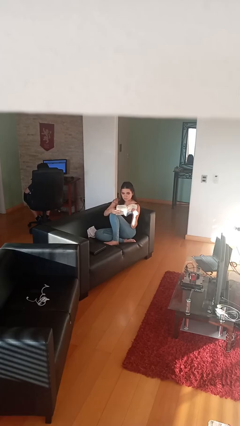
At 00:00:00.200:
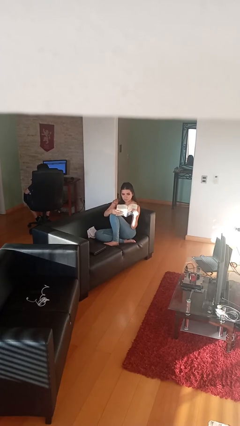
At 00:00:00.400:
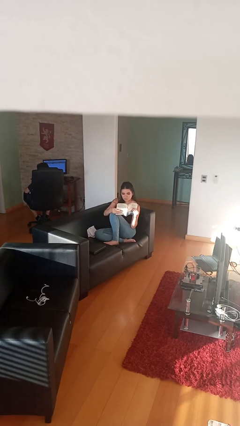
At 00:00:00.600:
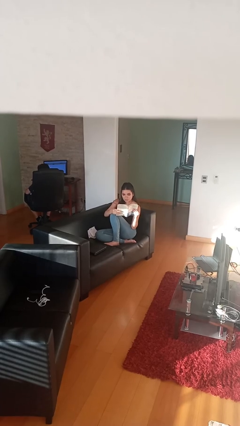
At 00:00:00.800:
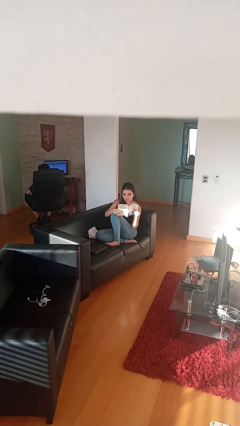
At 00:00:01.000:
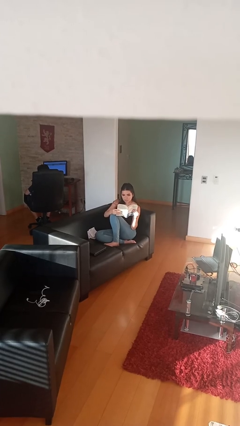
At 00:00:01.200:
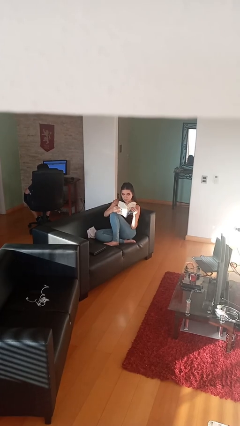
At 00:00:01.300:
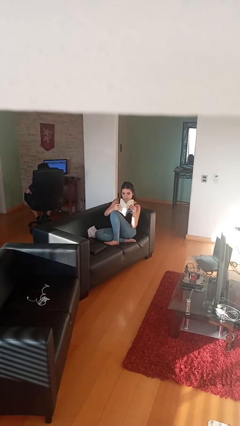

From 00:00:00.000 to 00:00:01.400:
person reads document

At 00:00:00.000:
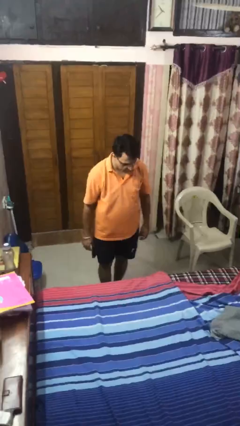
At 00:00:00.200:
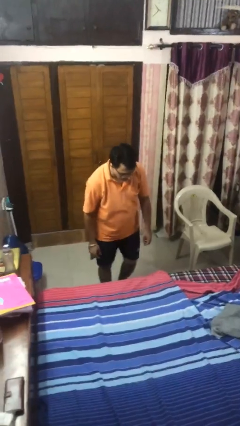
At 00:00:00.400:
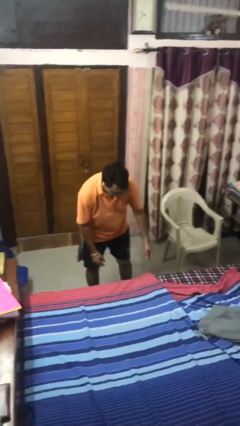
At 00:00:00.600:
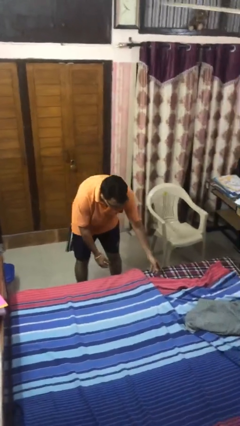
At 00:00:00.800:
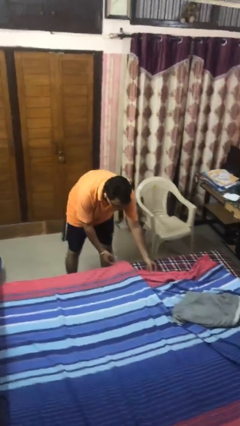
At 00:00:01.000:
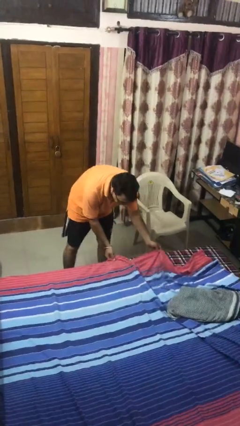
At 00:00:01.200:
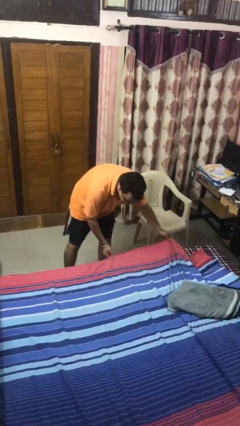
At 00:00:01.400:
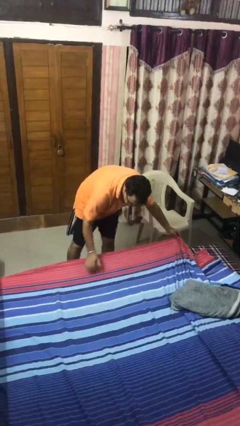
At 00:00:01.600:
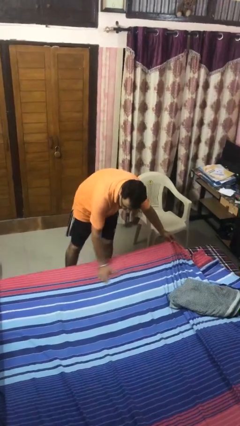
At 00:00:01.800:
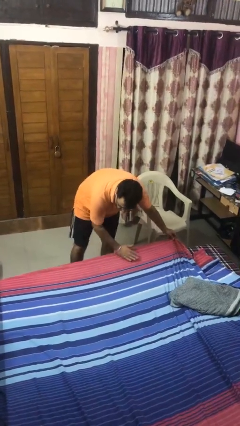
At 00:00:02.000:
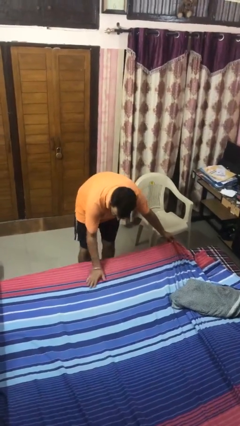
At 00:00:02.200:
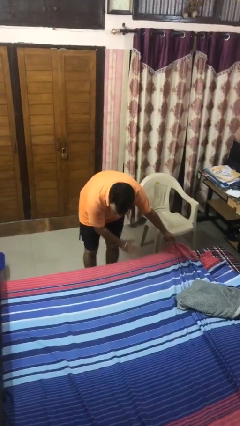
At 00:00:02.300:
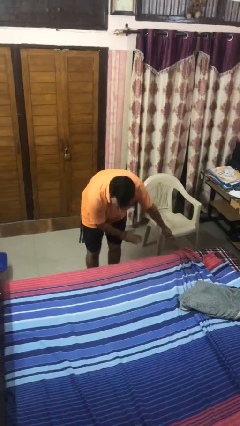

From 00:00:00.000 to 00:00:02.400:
person makes bed

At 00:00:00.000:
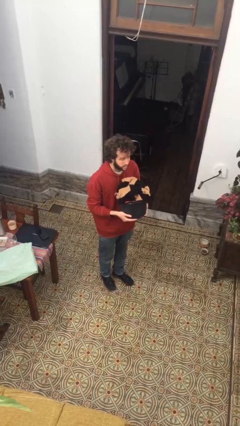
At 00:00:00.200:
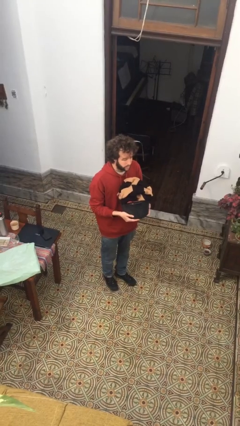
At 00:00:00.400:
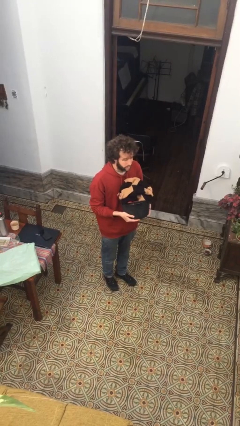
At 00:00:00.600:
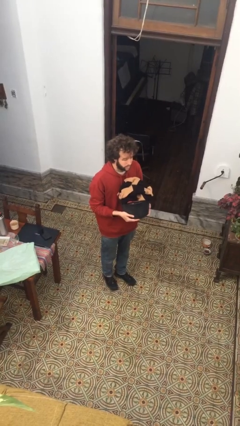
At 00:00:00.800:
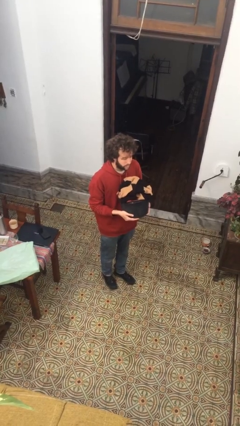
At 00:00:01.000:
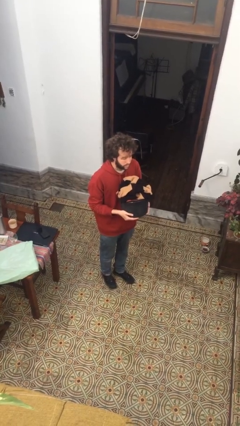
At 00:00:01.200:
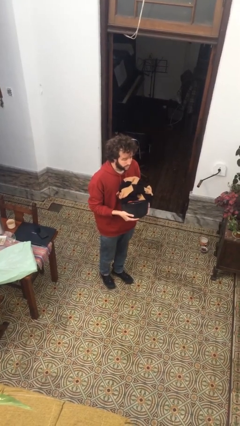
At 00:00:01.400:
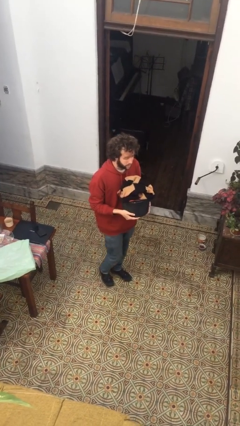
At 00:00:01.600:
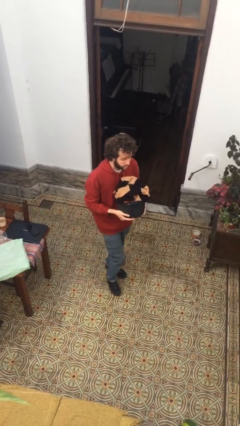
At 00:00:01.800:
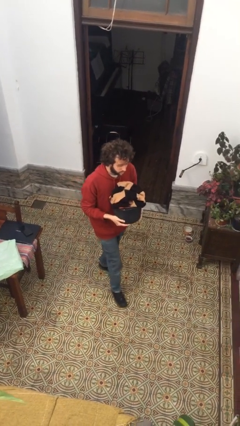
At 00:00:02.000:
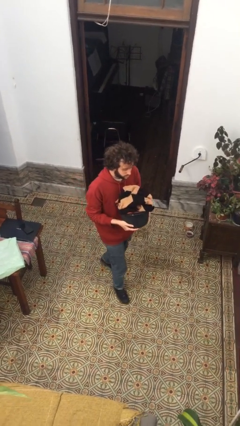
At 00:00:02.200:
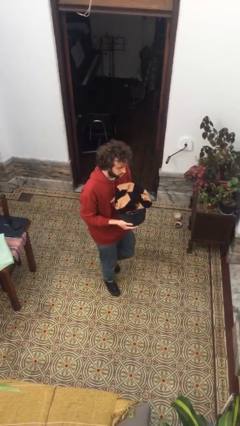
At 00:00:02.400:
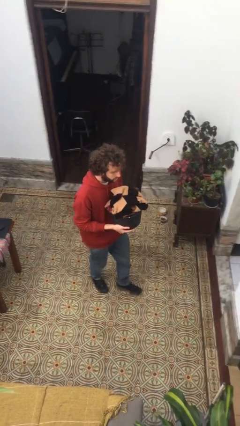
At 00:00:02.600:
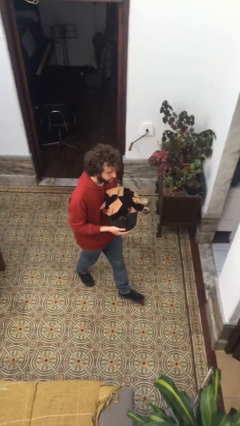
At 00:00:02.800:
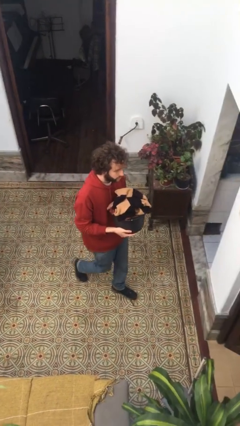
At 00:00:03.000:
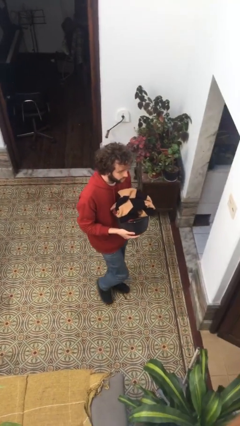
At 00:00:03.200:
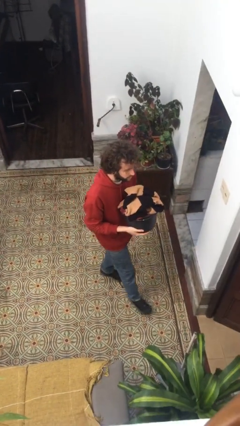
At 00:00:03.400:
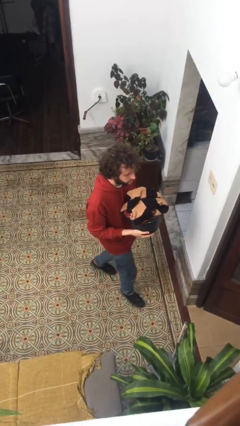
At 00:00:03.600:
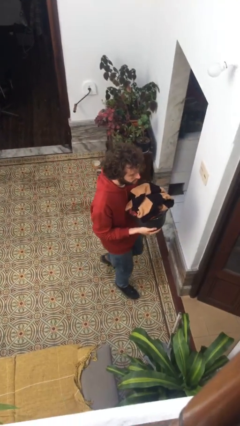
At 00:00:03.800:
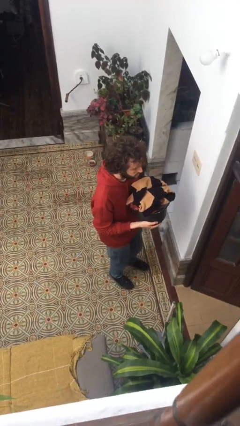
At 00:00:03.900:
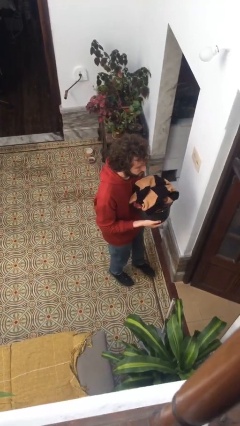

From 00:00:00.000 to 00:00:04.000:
person carries laundry basket

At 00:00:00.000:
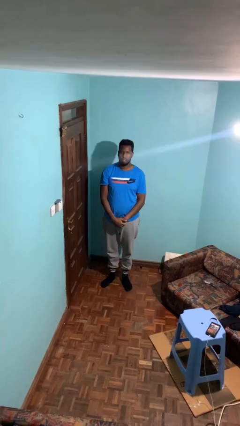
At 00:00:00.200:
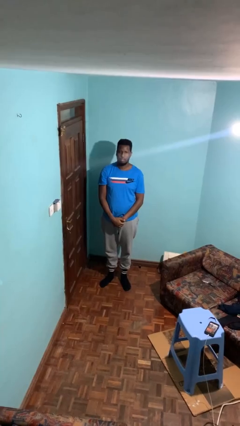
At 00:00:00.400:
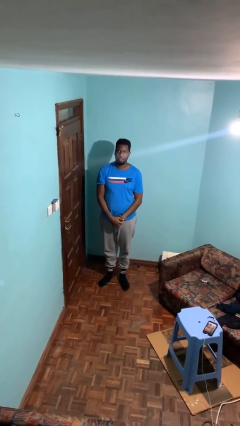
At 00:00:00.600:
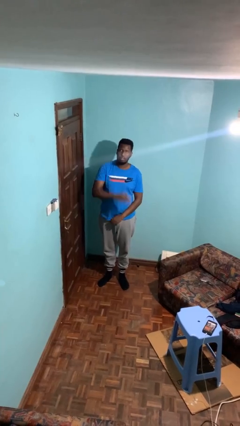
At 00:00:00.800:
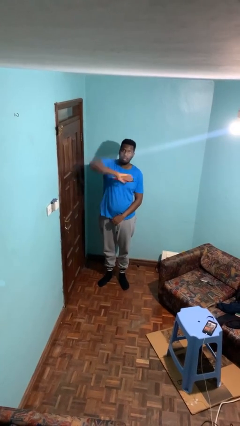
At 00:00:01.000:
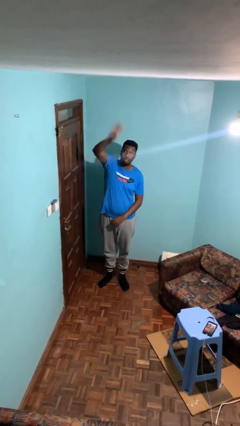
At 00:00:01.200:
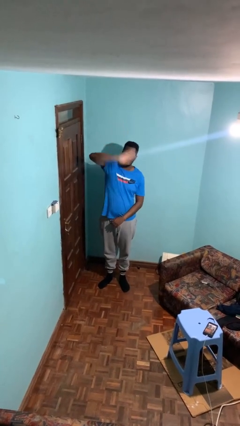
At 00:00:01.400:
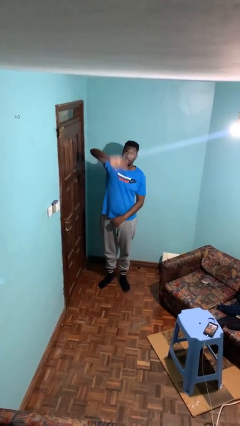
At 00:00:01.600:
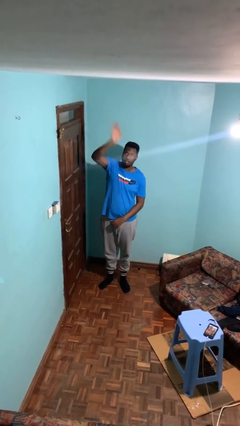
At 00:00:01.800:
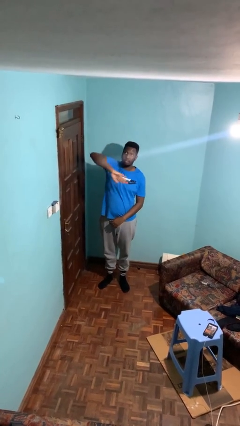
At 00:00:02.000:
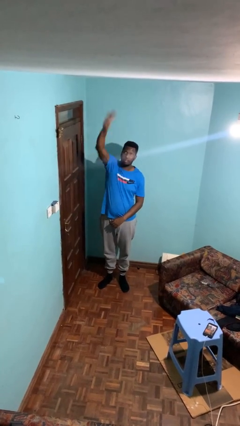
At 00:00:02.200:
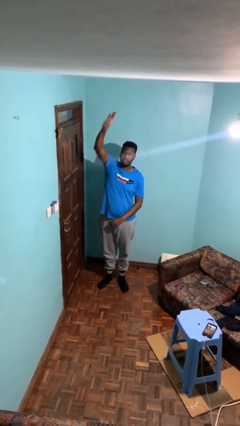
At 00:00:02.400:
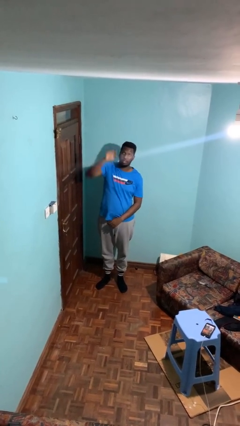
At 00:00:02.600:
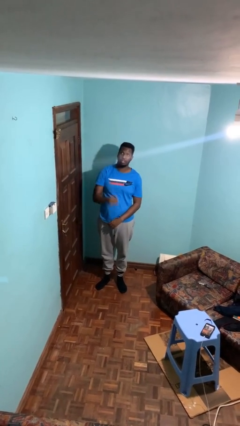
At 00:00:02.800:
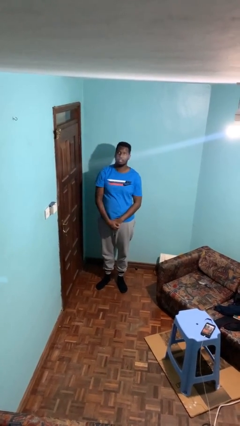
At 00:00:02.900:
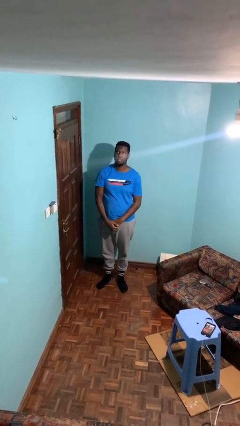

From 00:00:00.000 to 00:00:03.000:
person gestures swipe up

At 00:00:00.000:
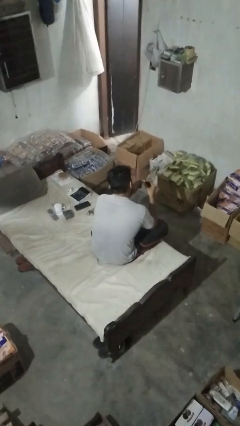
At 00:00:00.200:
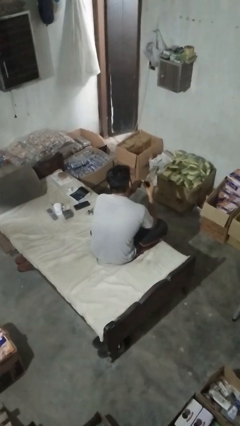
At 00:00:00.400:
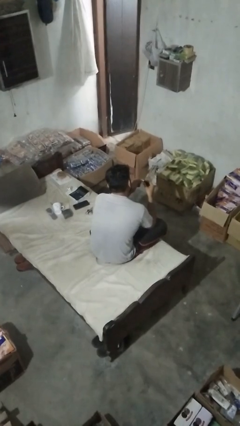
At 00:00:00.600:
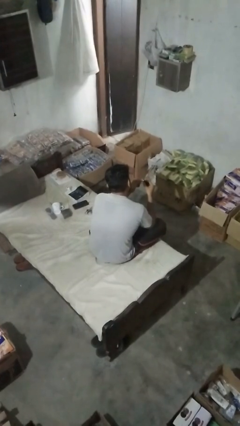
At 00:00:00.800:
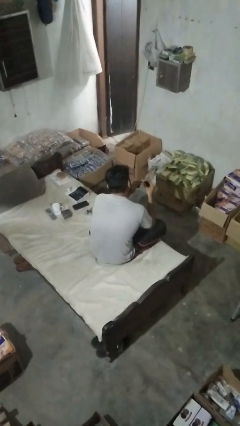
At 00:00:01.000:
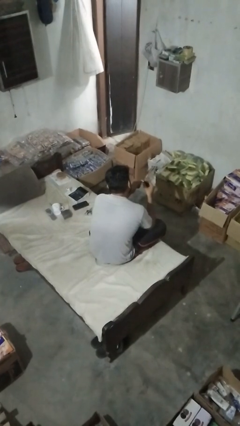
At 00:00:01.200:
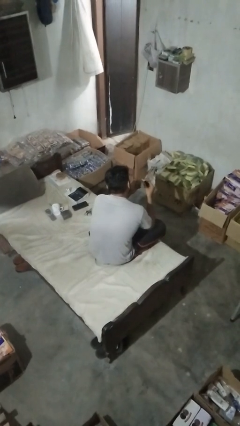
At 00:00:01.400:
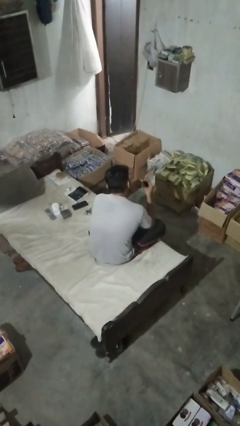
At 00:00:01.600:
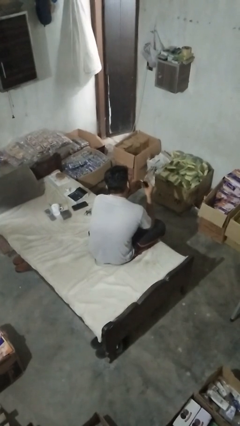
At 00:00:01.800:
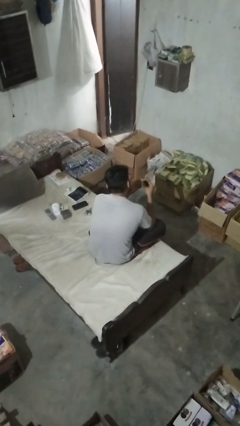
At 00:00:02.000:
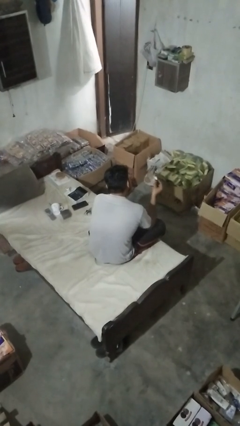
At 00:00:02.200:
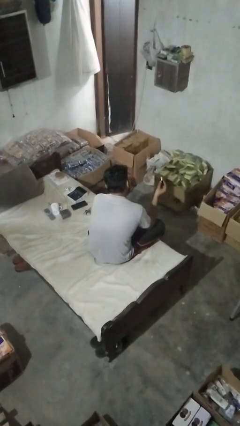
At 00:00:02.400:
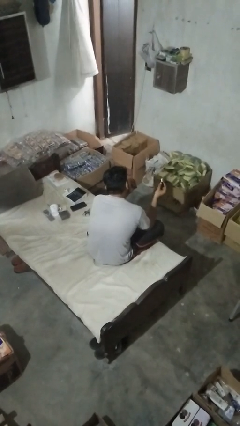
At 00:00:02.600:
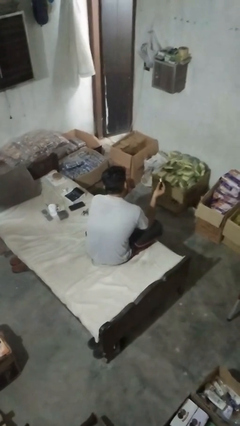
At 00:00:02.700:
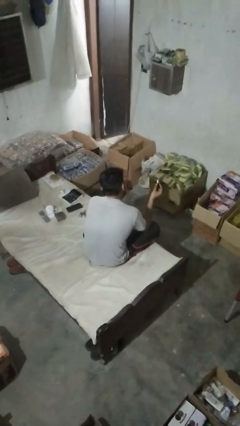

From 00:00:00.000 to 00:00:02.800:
person paints fingernails

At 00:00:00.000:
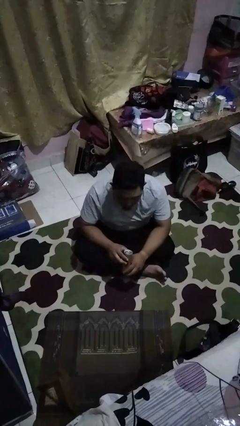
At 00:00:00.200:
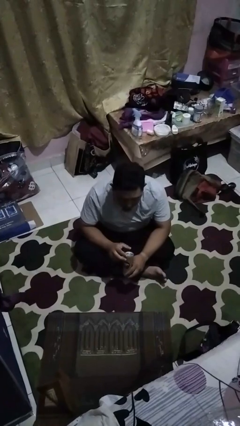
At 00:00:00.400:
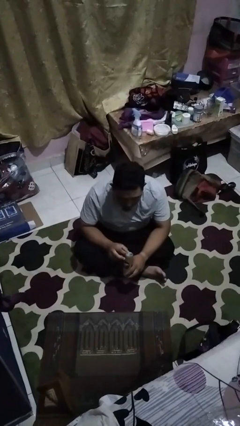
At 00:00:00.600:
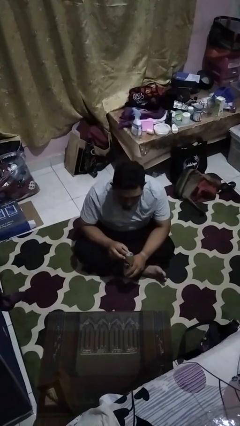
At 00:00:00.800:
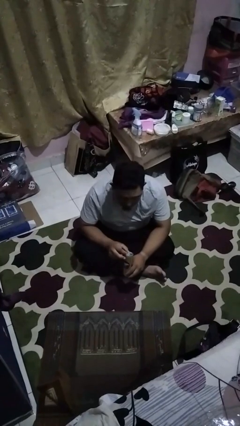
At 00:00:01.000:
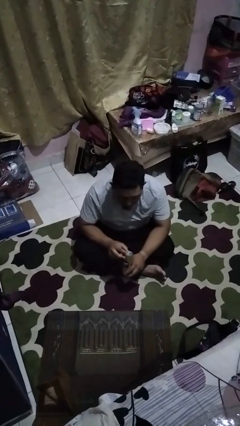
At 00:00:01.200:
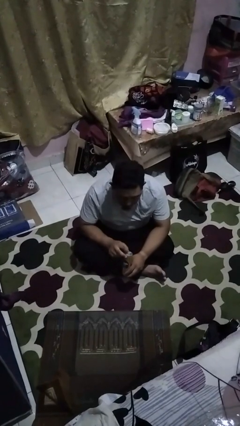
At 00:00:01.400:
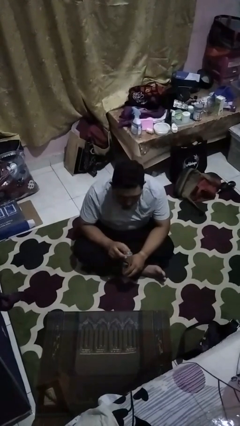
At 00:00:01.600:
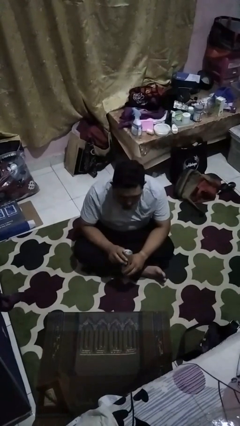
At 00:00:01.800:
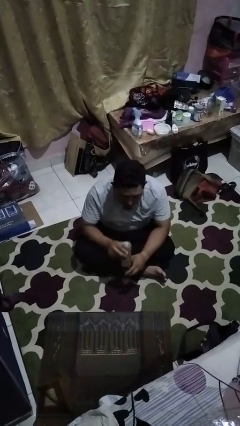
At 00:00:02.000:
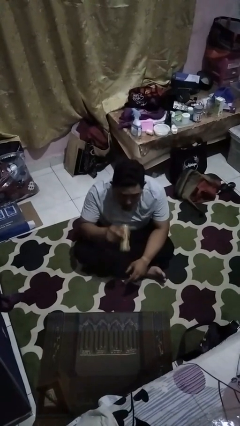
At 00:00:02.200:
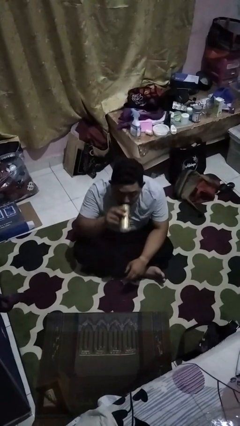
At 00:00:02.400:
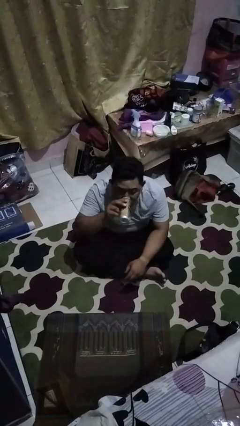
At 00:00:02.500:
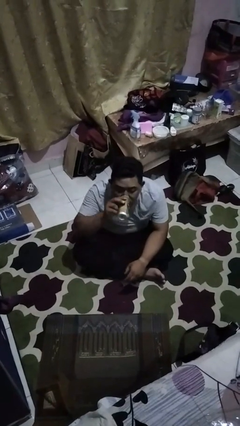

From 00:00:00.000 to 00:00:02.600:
person opens beverage can

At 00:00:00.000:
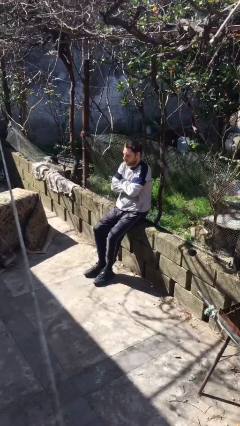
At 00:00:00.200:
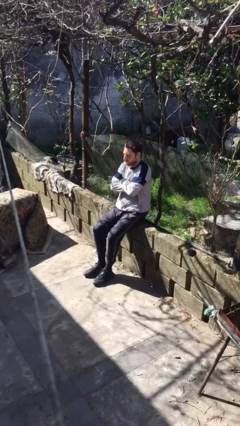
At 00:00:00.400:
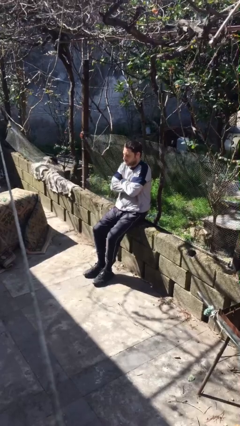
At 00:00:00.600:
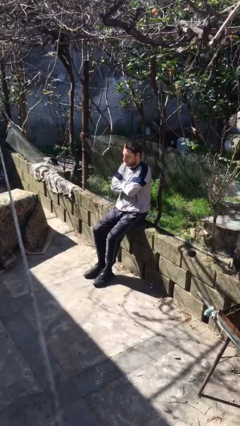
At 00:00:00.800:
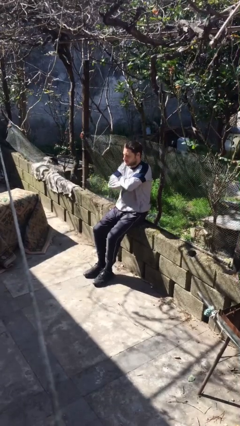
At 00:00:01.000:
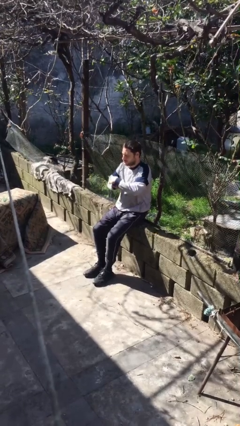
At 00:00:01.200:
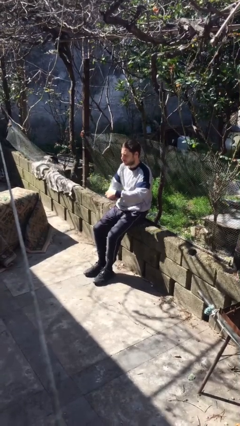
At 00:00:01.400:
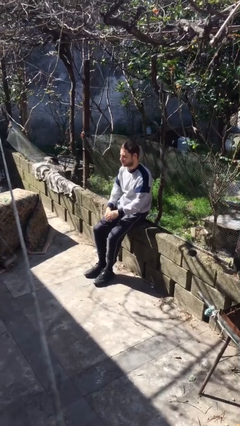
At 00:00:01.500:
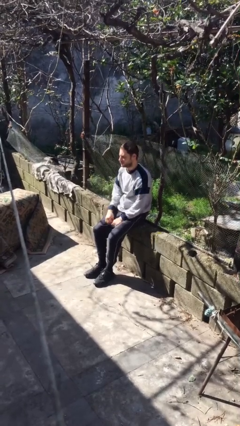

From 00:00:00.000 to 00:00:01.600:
person crosses arms
